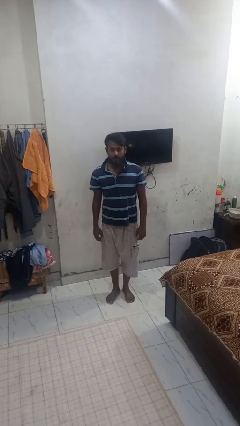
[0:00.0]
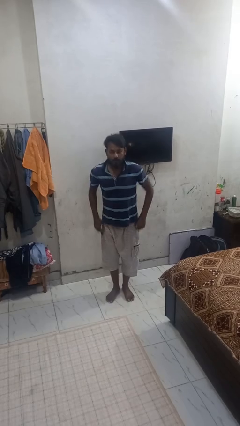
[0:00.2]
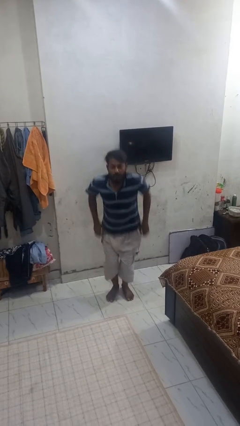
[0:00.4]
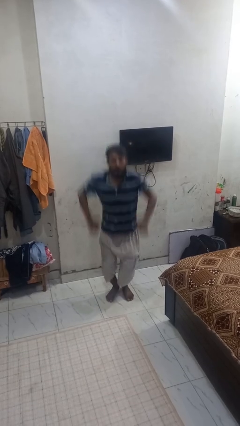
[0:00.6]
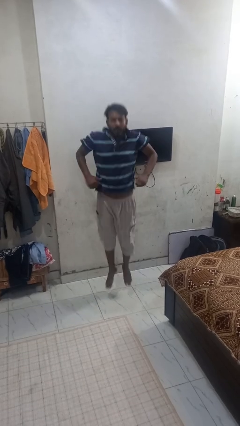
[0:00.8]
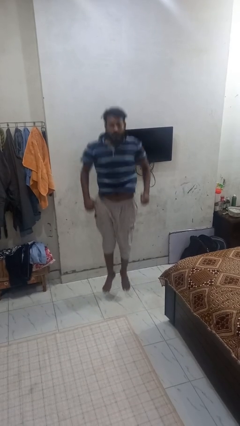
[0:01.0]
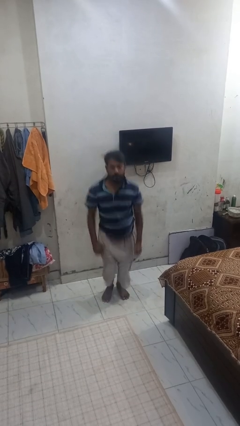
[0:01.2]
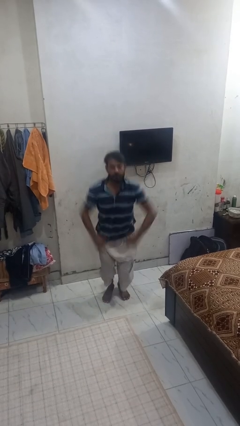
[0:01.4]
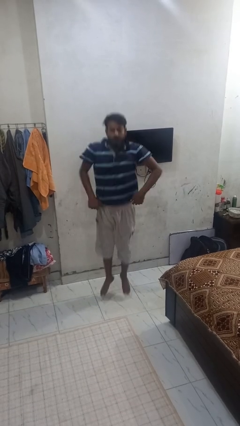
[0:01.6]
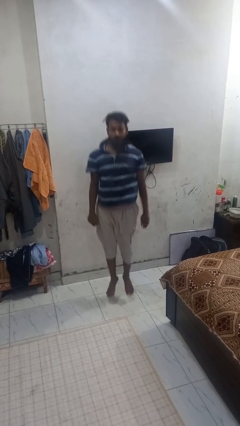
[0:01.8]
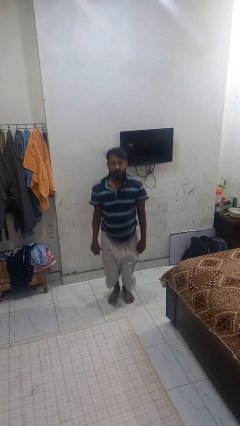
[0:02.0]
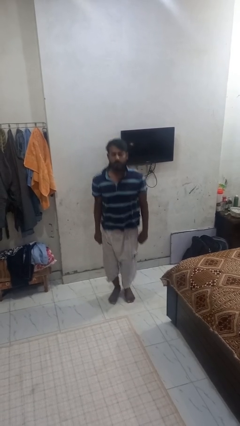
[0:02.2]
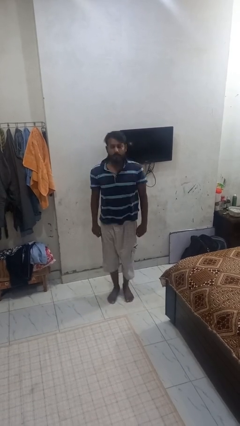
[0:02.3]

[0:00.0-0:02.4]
person jumps

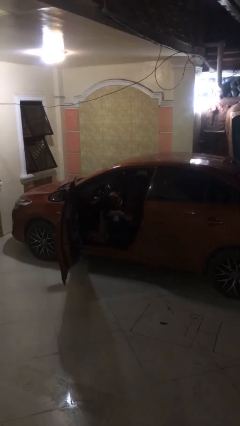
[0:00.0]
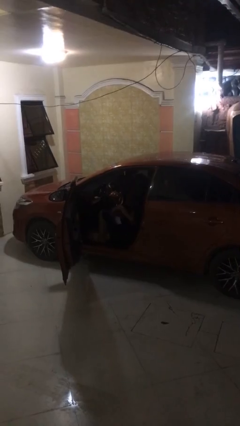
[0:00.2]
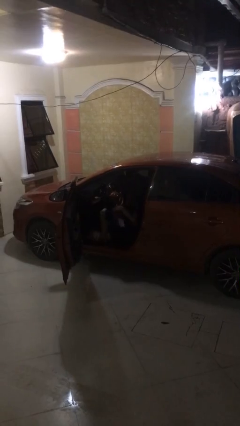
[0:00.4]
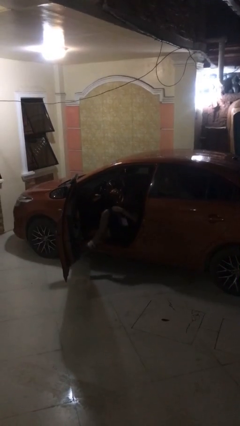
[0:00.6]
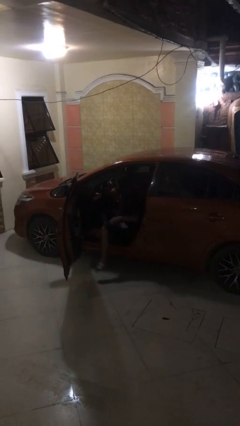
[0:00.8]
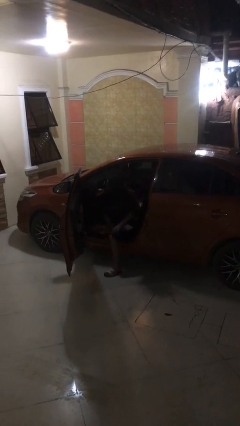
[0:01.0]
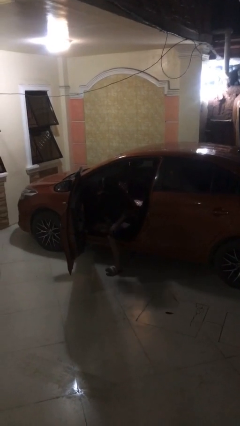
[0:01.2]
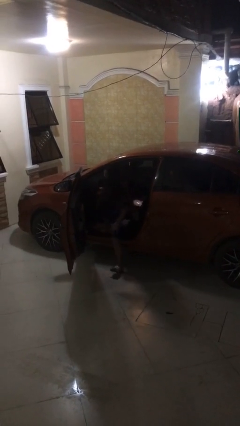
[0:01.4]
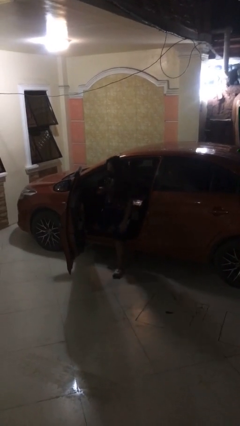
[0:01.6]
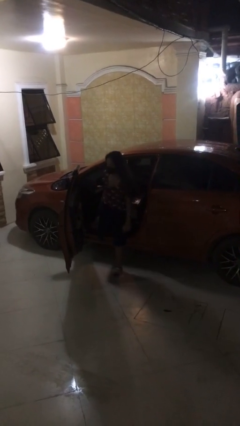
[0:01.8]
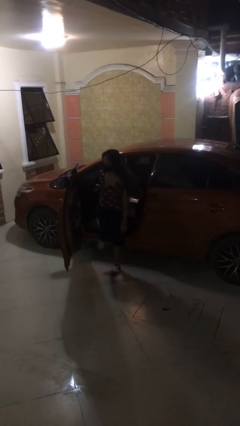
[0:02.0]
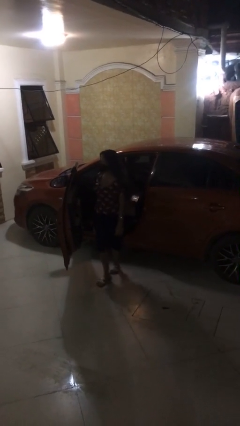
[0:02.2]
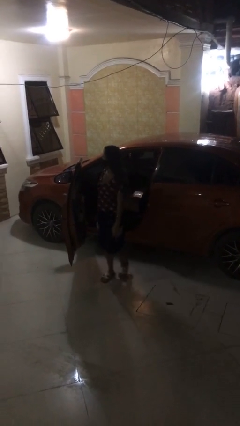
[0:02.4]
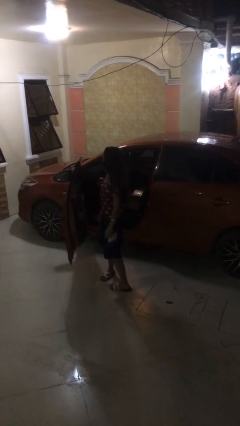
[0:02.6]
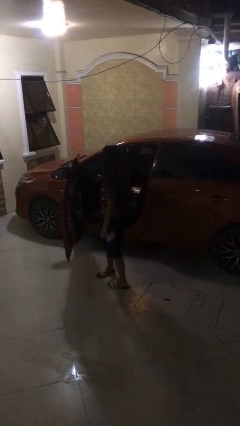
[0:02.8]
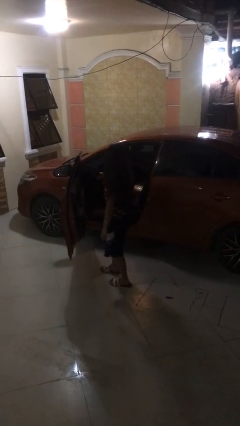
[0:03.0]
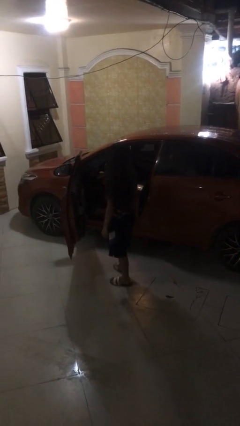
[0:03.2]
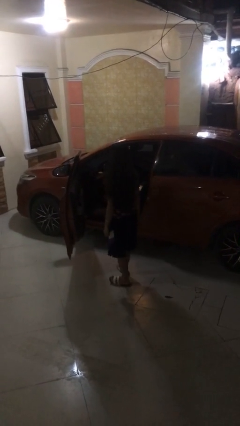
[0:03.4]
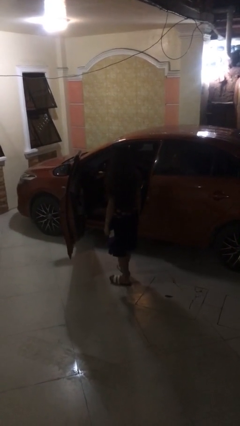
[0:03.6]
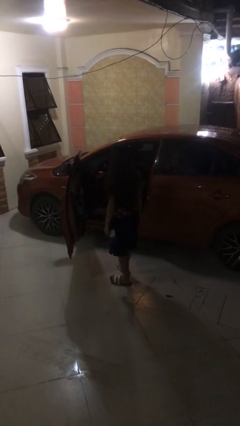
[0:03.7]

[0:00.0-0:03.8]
person exits car

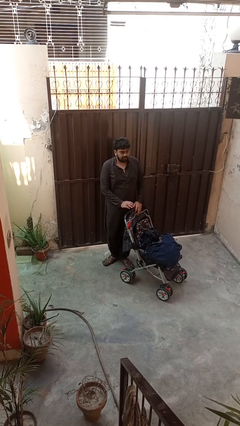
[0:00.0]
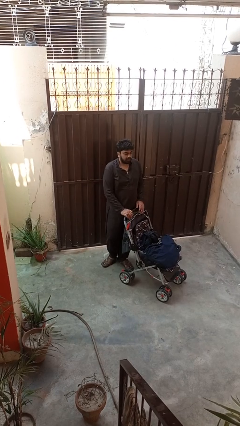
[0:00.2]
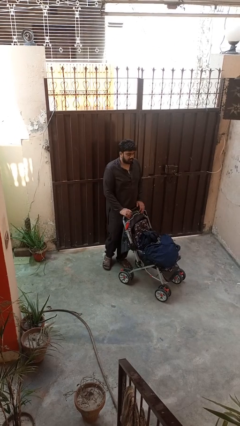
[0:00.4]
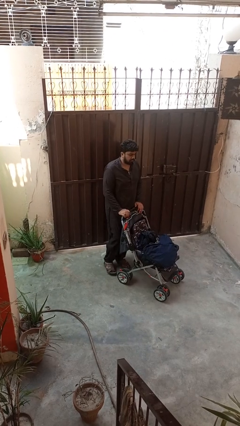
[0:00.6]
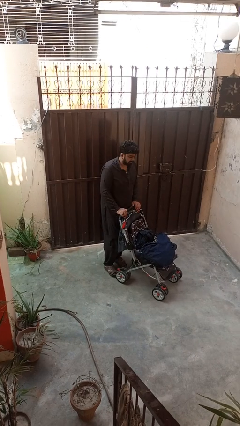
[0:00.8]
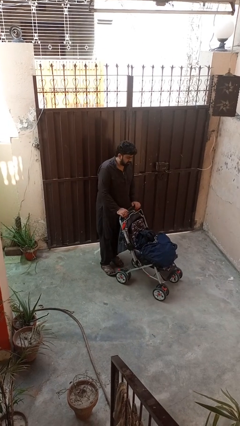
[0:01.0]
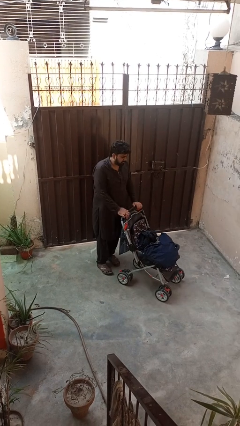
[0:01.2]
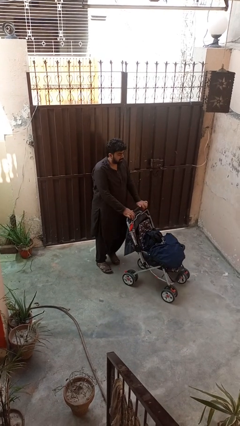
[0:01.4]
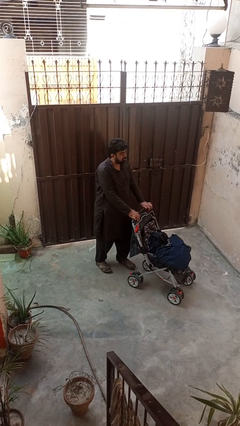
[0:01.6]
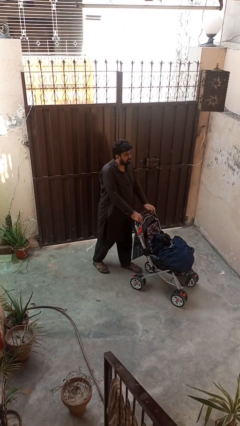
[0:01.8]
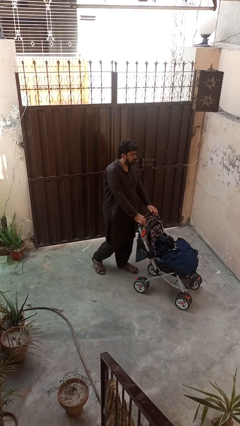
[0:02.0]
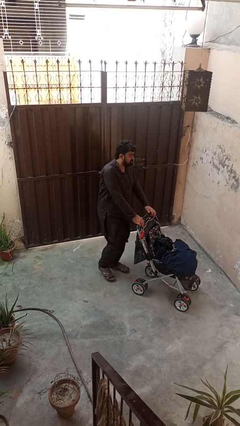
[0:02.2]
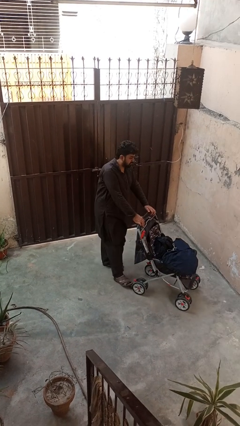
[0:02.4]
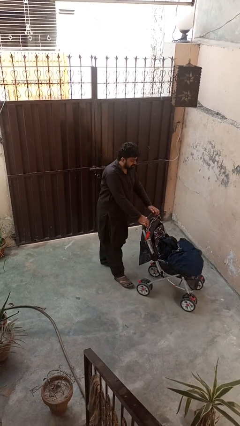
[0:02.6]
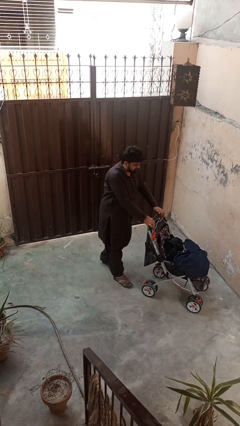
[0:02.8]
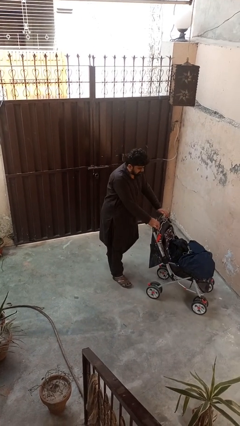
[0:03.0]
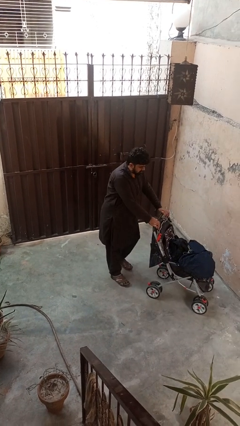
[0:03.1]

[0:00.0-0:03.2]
person pushes wheeled cart

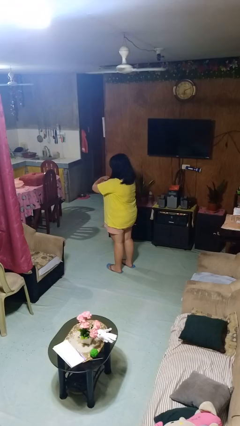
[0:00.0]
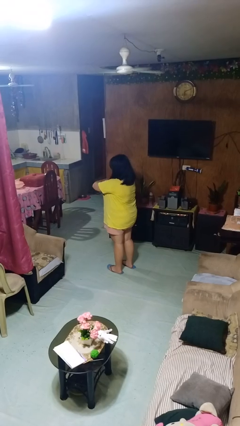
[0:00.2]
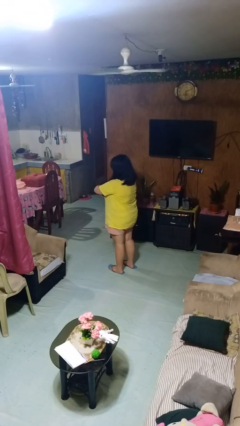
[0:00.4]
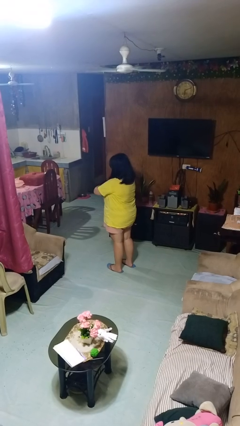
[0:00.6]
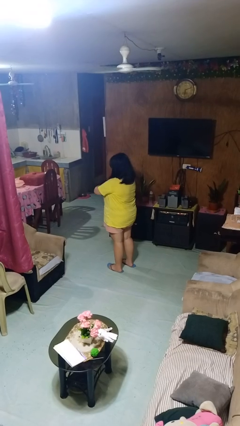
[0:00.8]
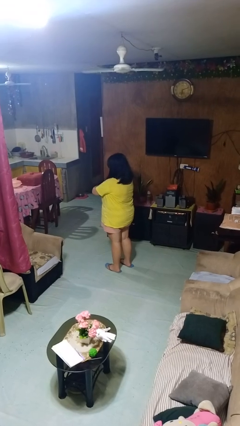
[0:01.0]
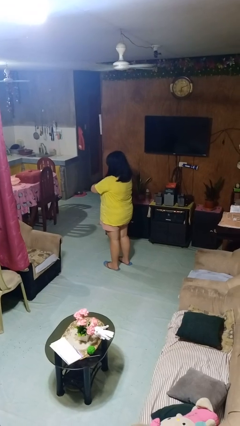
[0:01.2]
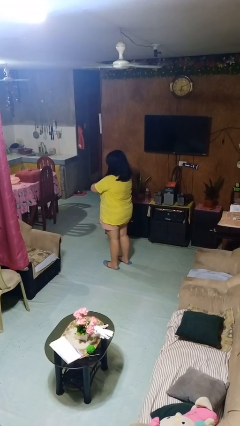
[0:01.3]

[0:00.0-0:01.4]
person crosses arms

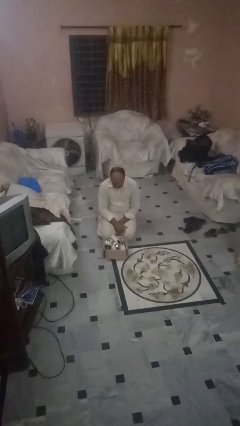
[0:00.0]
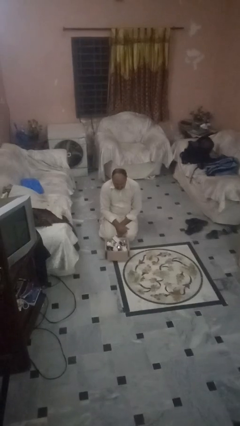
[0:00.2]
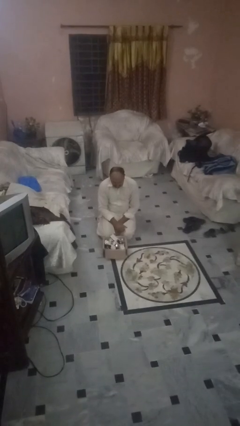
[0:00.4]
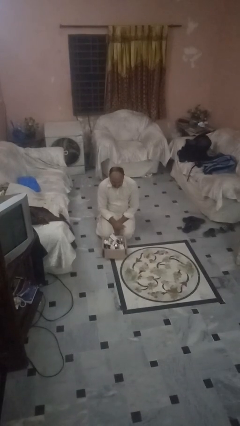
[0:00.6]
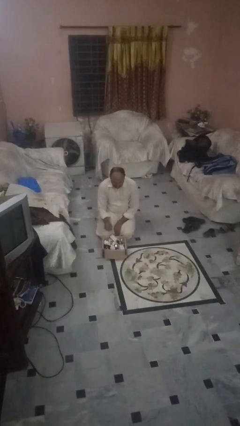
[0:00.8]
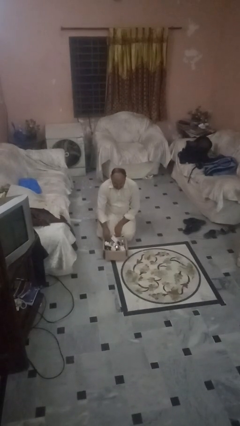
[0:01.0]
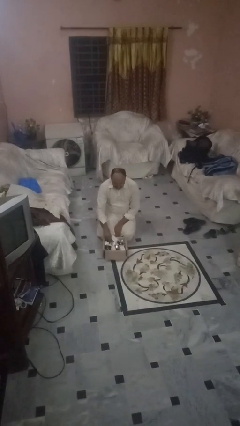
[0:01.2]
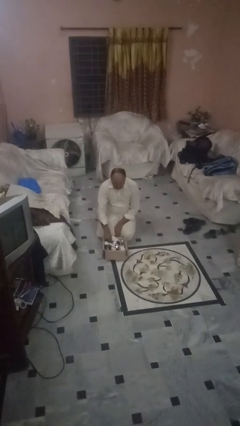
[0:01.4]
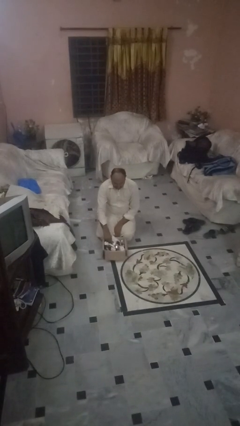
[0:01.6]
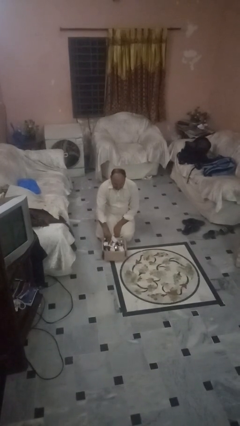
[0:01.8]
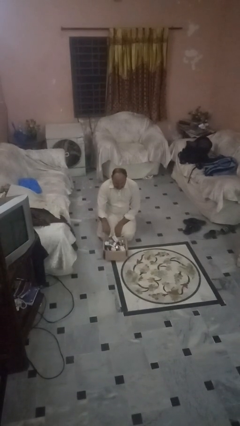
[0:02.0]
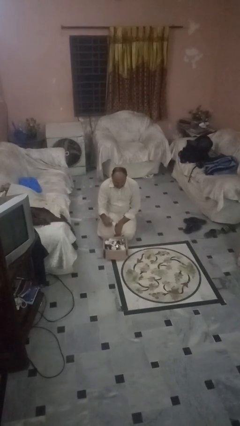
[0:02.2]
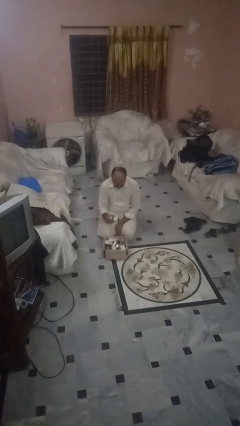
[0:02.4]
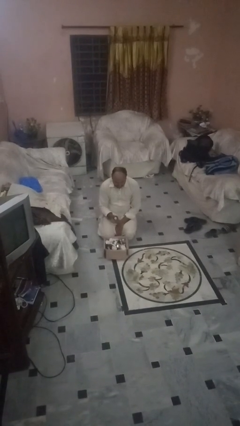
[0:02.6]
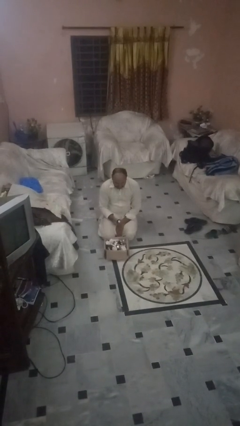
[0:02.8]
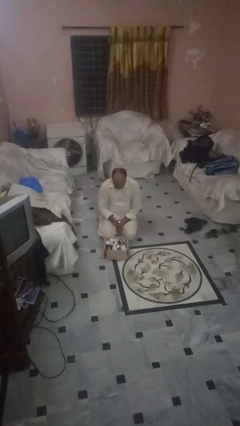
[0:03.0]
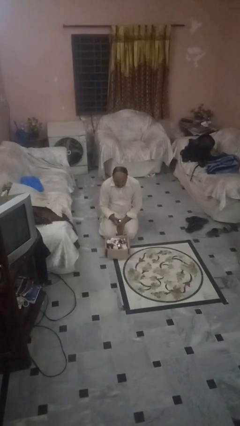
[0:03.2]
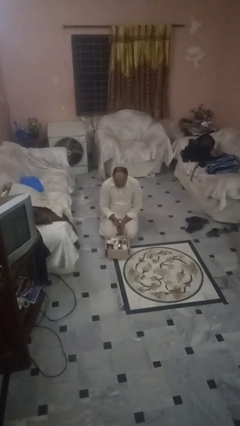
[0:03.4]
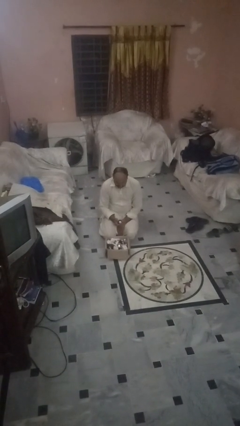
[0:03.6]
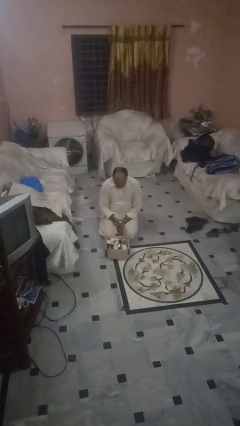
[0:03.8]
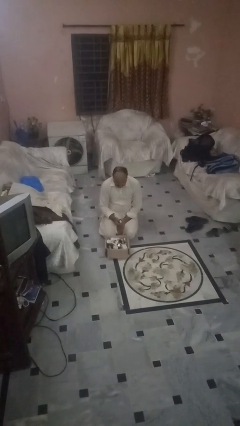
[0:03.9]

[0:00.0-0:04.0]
person takes object from box

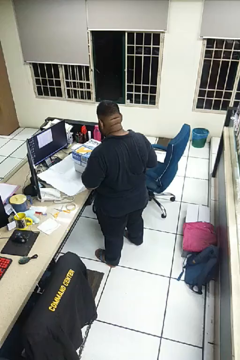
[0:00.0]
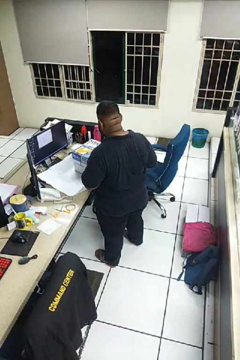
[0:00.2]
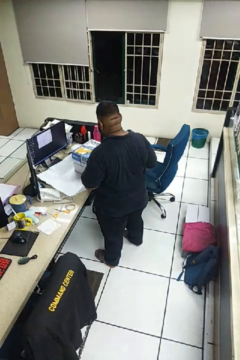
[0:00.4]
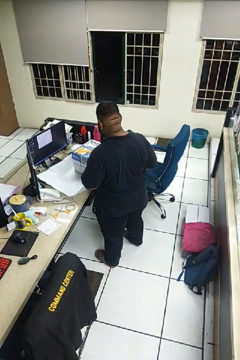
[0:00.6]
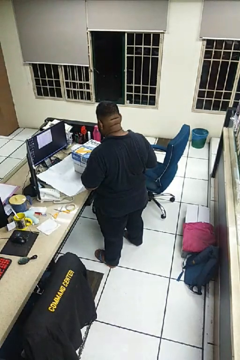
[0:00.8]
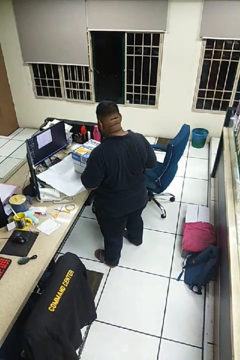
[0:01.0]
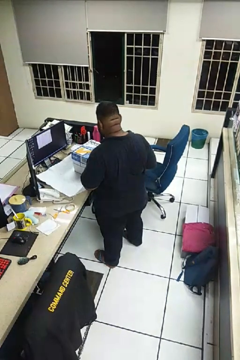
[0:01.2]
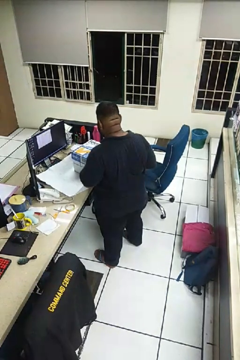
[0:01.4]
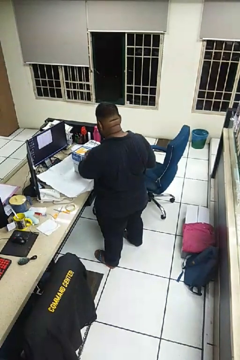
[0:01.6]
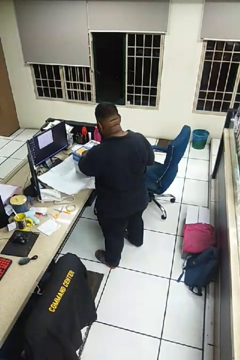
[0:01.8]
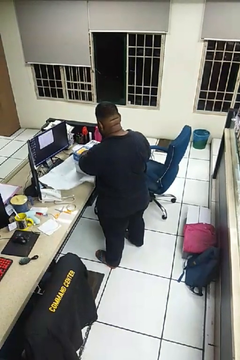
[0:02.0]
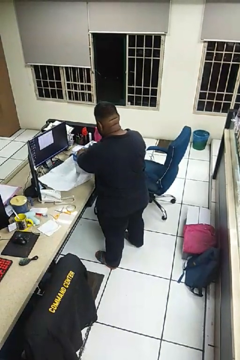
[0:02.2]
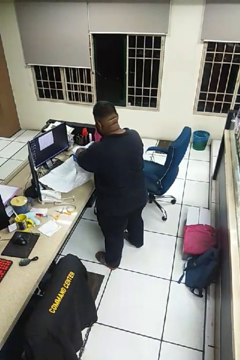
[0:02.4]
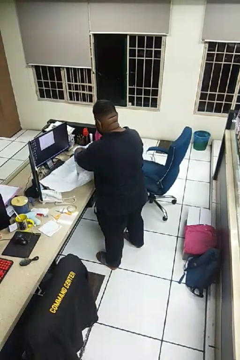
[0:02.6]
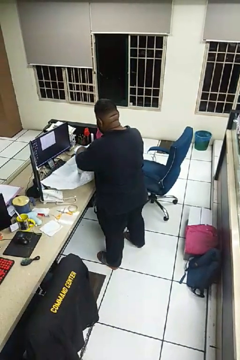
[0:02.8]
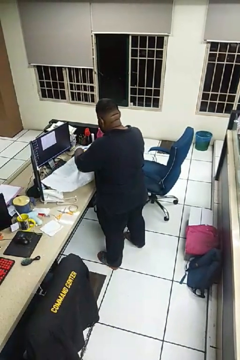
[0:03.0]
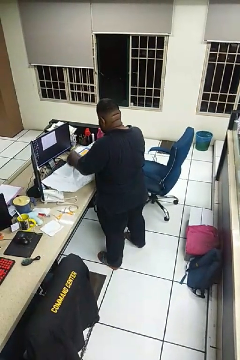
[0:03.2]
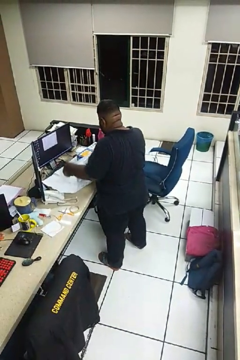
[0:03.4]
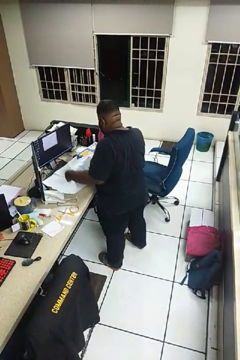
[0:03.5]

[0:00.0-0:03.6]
person wraps box
